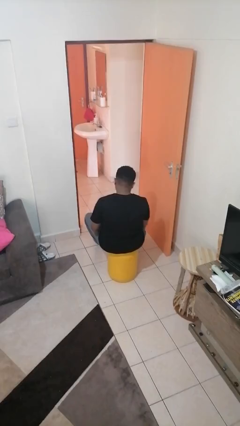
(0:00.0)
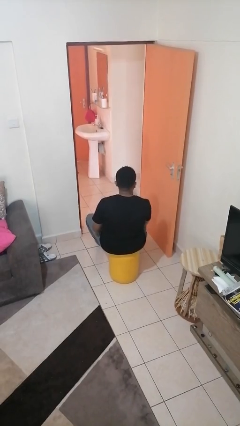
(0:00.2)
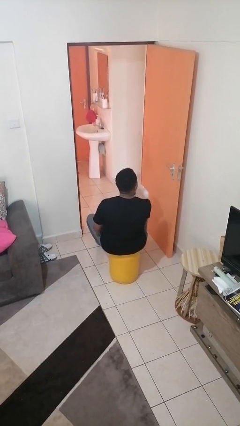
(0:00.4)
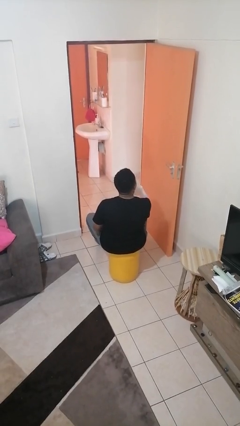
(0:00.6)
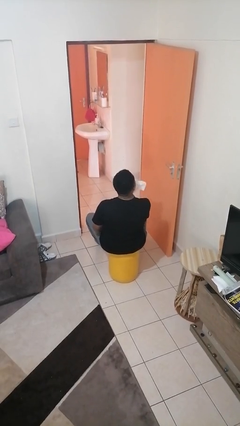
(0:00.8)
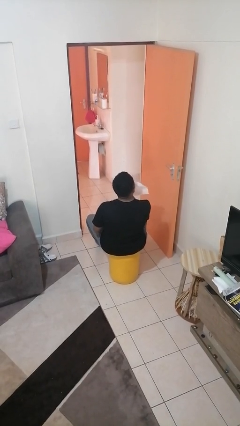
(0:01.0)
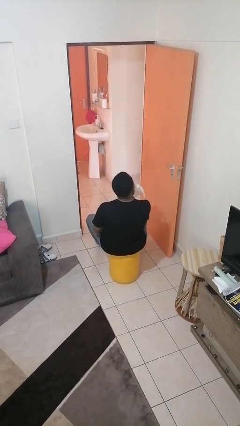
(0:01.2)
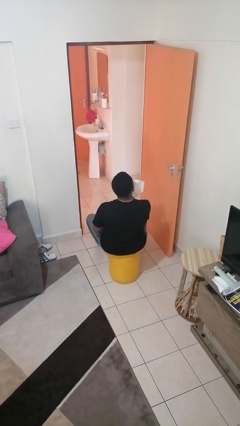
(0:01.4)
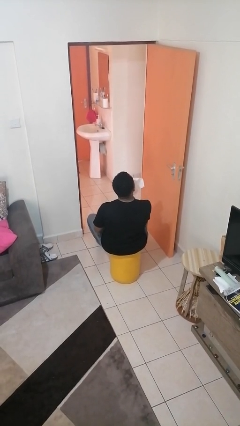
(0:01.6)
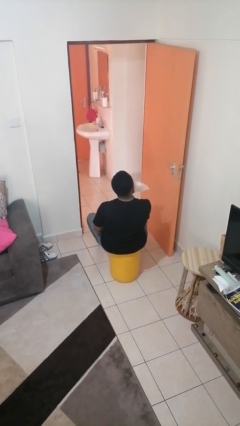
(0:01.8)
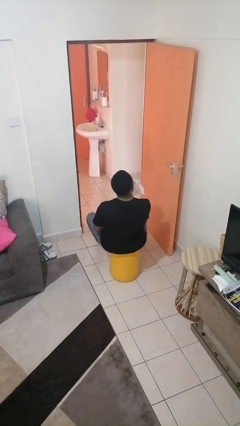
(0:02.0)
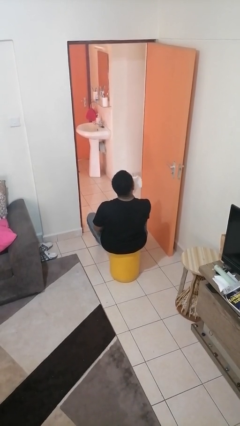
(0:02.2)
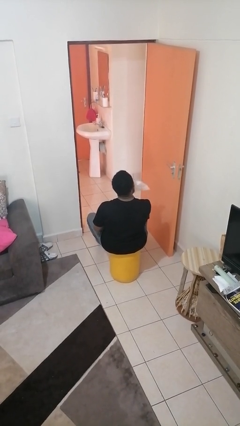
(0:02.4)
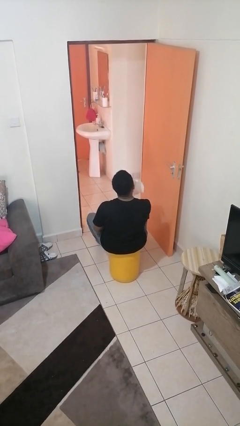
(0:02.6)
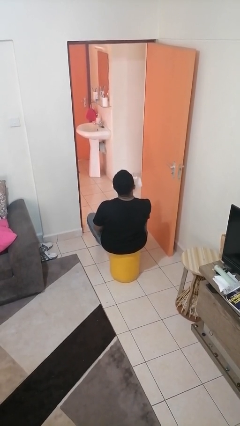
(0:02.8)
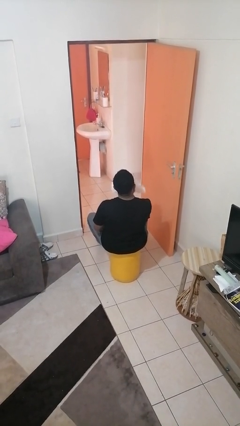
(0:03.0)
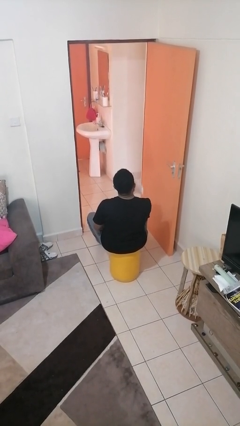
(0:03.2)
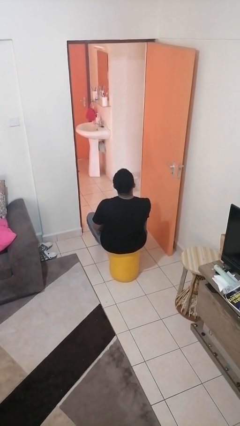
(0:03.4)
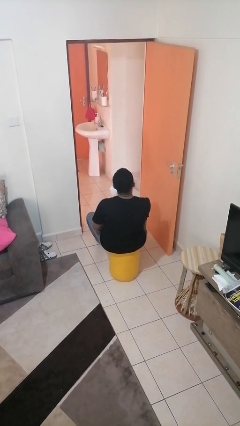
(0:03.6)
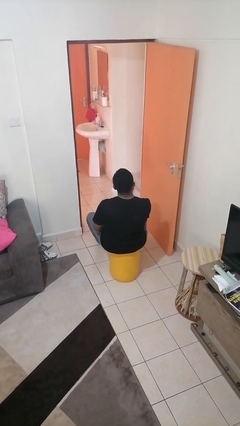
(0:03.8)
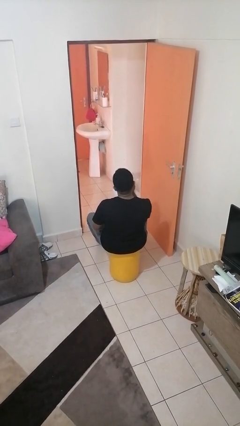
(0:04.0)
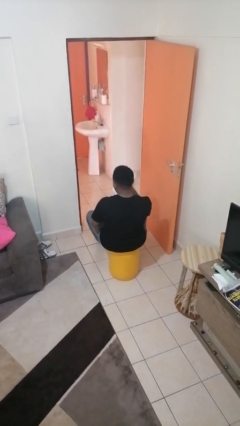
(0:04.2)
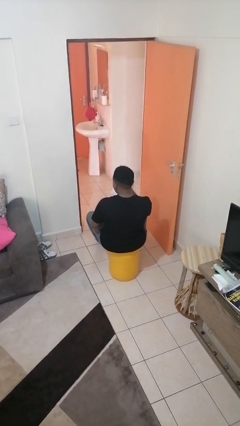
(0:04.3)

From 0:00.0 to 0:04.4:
person wipes mouth with napkin

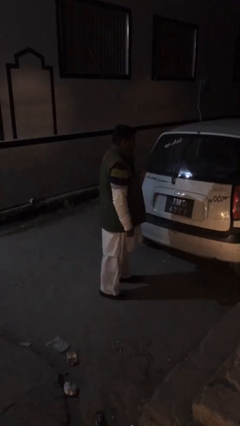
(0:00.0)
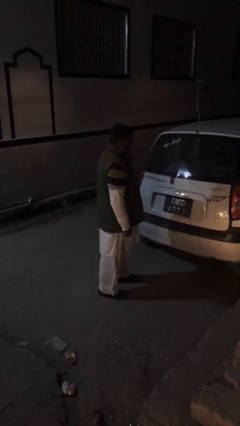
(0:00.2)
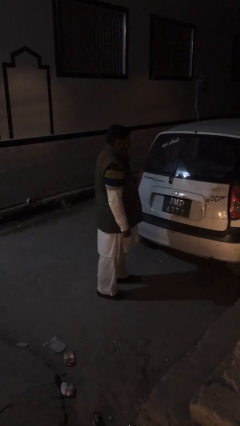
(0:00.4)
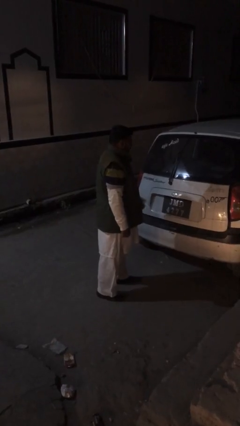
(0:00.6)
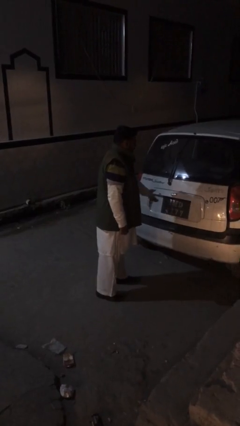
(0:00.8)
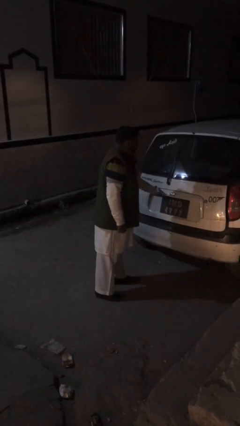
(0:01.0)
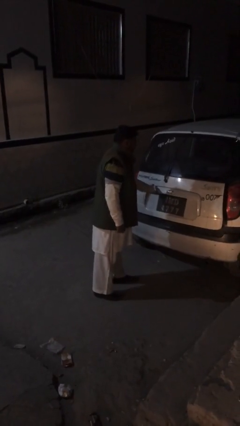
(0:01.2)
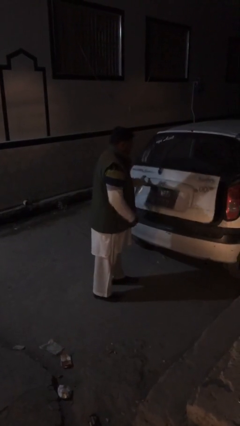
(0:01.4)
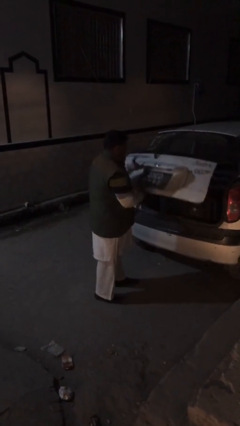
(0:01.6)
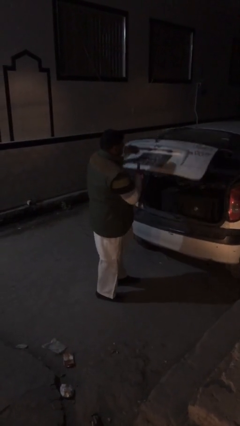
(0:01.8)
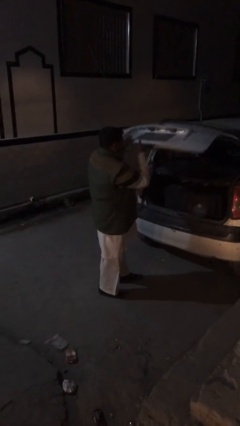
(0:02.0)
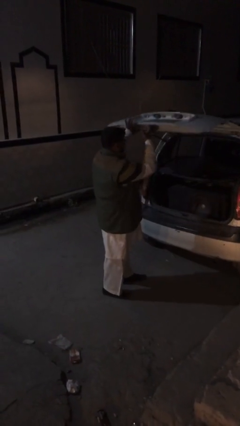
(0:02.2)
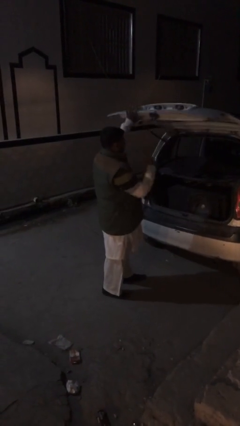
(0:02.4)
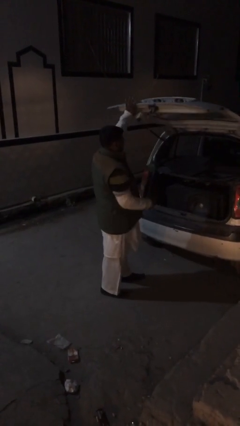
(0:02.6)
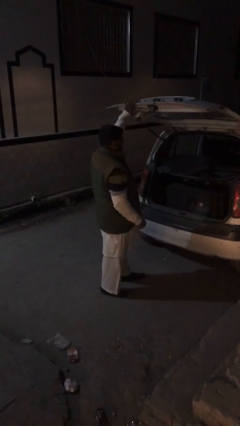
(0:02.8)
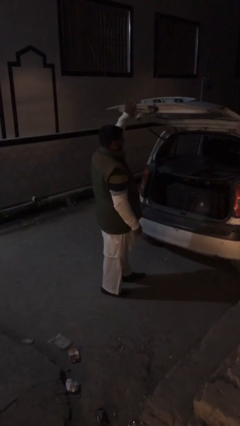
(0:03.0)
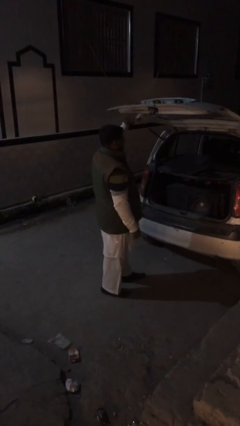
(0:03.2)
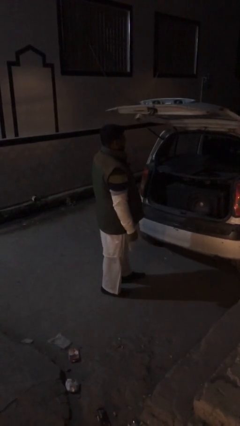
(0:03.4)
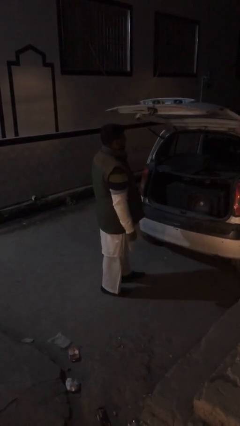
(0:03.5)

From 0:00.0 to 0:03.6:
person opens car trunk

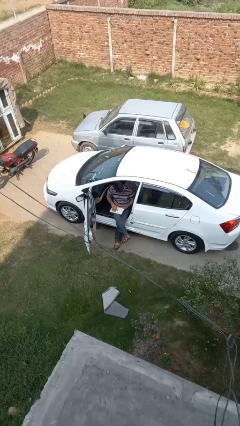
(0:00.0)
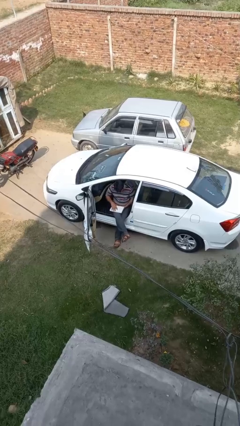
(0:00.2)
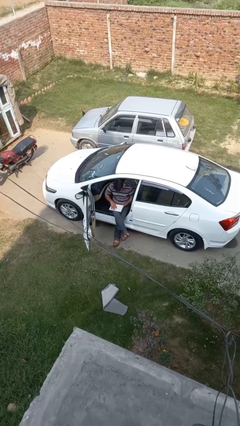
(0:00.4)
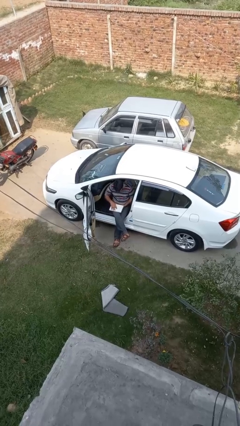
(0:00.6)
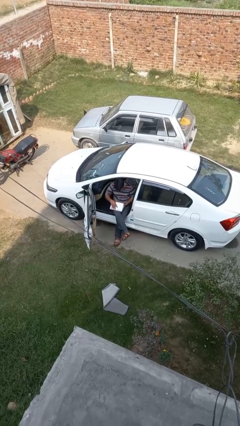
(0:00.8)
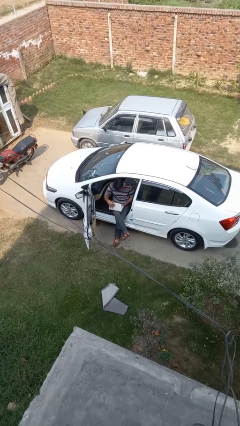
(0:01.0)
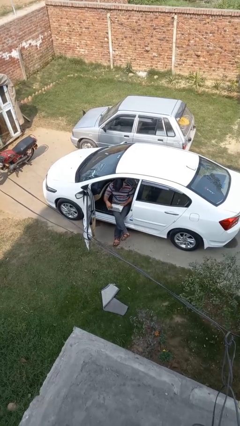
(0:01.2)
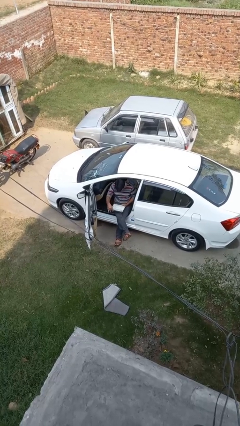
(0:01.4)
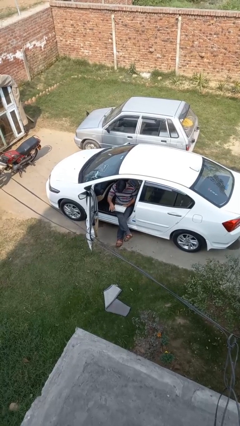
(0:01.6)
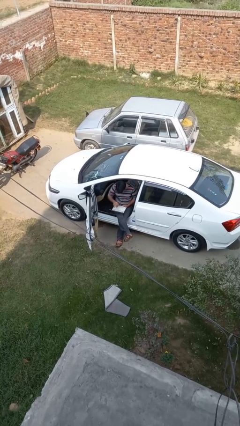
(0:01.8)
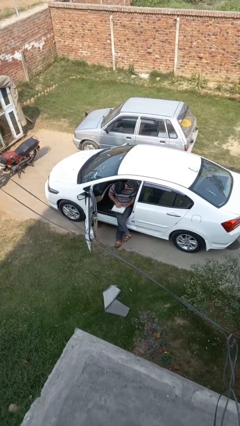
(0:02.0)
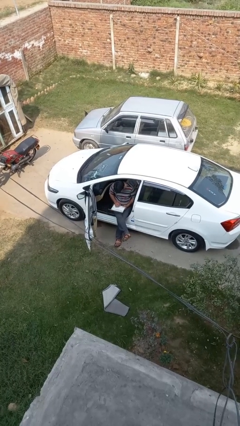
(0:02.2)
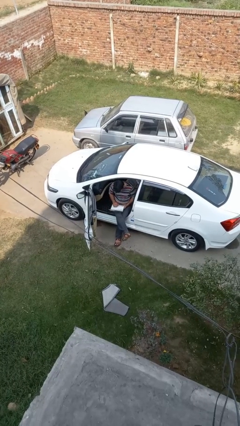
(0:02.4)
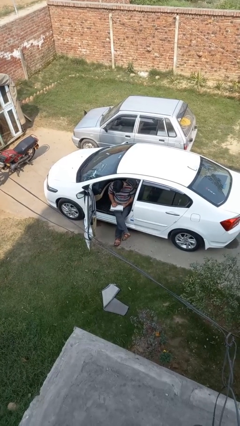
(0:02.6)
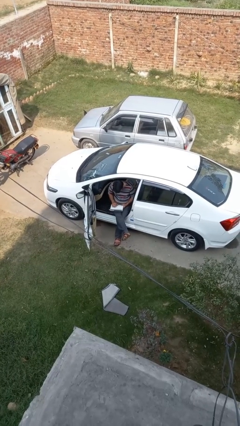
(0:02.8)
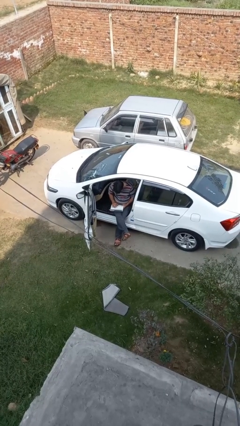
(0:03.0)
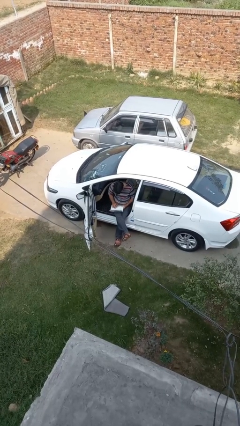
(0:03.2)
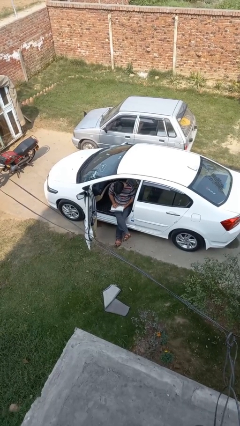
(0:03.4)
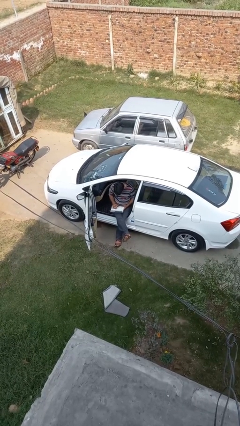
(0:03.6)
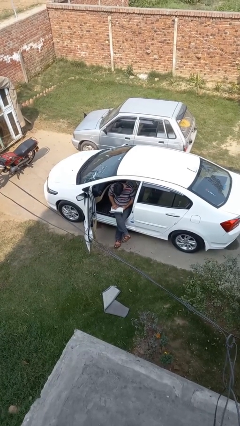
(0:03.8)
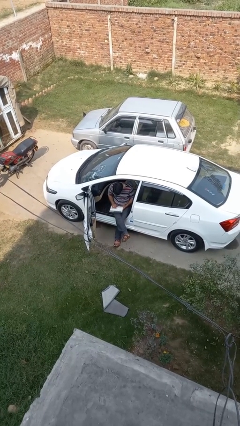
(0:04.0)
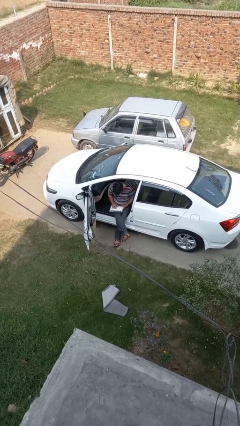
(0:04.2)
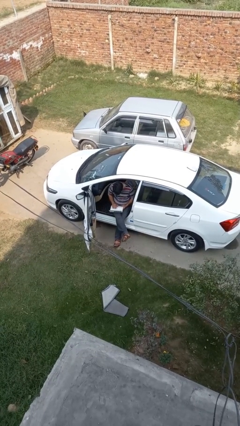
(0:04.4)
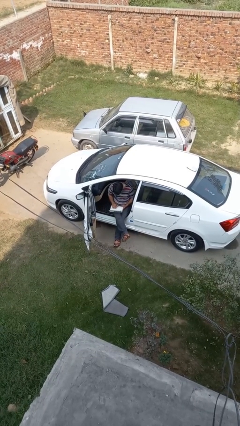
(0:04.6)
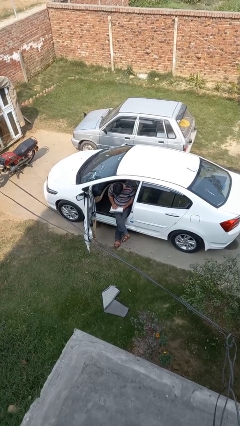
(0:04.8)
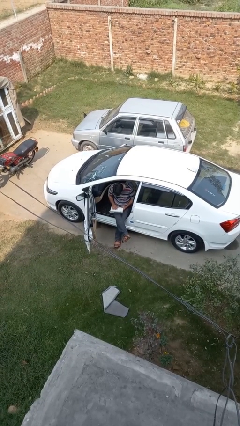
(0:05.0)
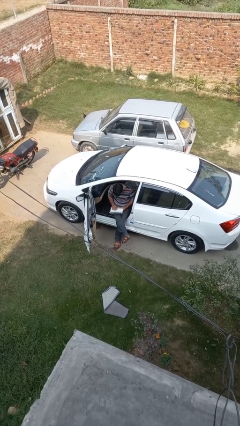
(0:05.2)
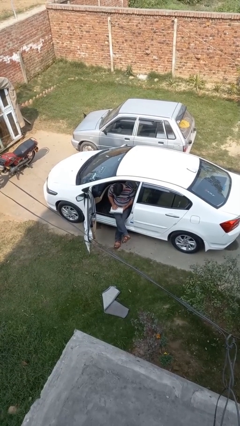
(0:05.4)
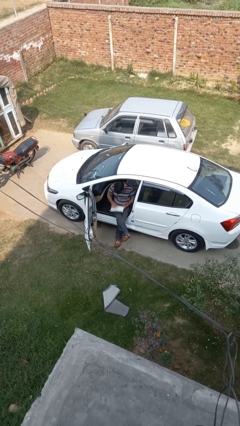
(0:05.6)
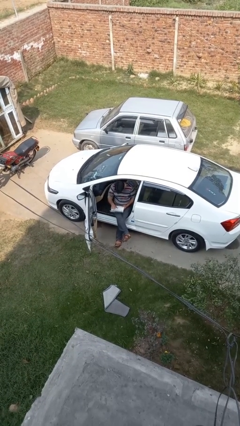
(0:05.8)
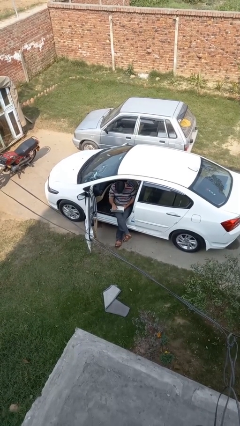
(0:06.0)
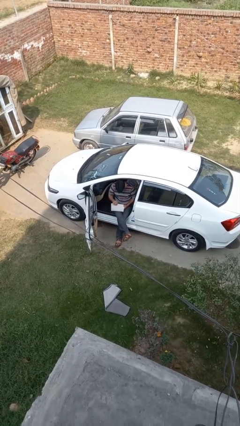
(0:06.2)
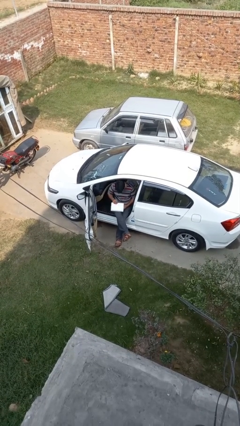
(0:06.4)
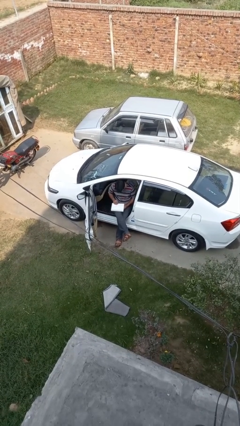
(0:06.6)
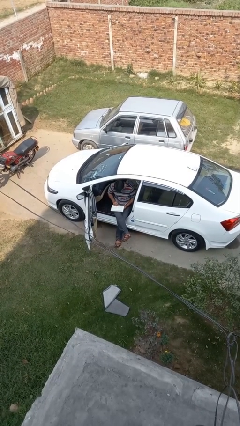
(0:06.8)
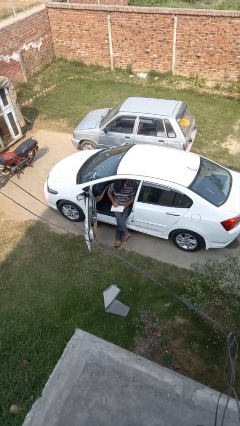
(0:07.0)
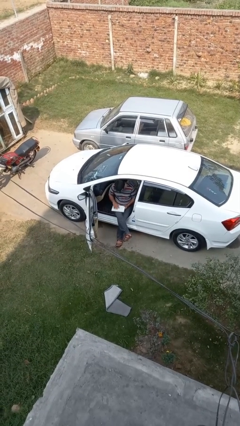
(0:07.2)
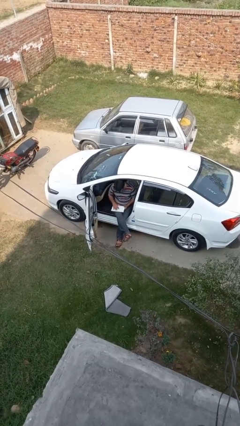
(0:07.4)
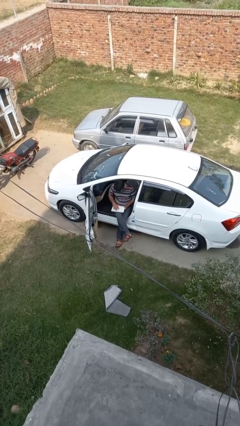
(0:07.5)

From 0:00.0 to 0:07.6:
person interacts with laptop

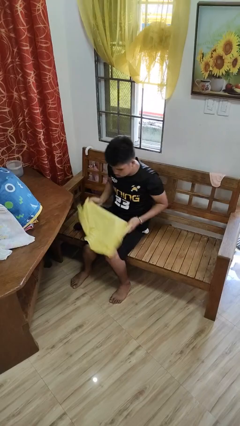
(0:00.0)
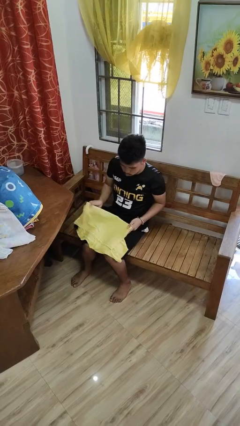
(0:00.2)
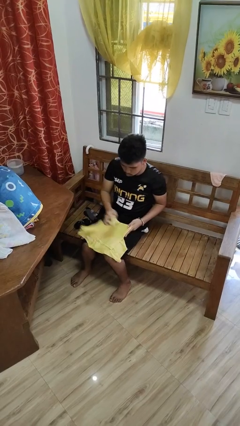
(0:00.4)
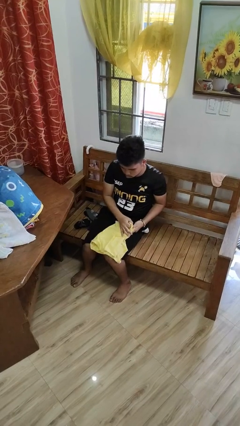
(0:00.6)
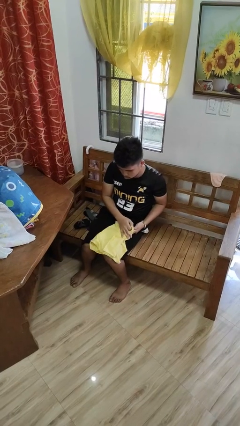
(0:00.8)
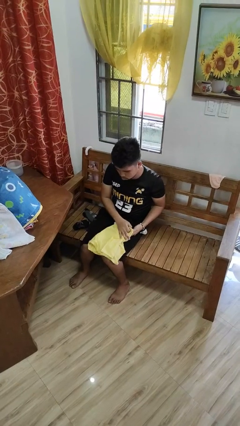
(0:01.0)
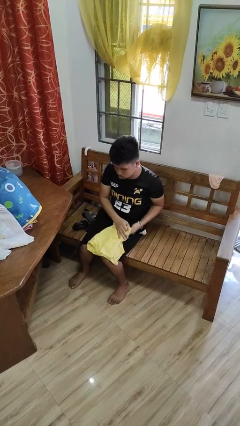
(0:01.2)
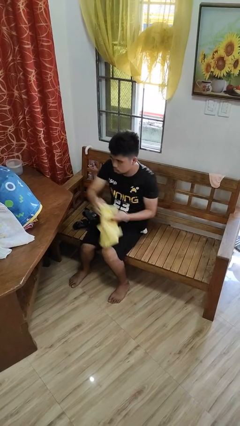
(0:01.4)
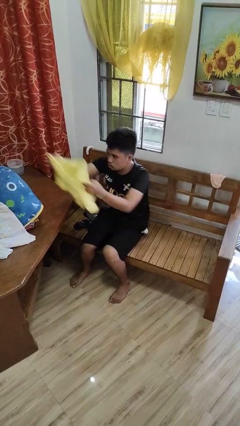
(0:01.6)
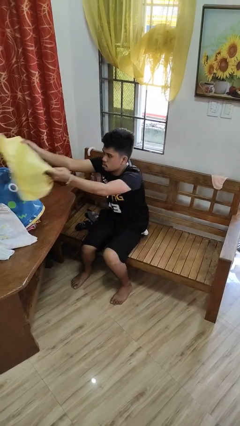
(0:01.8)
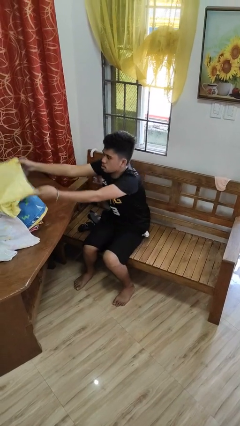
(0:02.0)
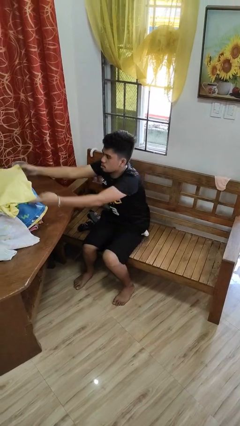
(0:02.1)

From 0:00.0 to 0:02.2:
person folds shirt
